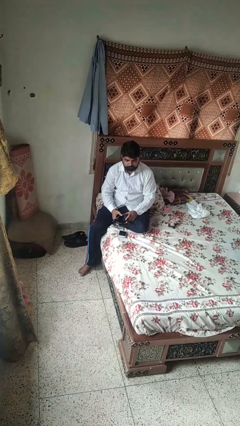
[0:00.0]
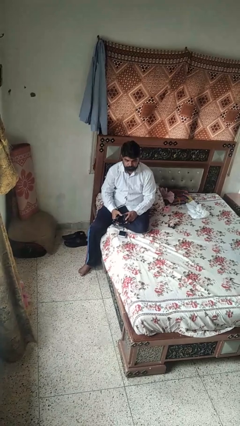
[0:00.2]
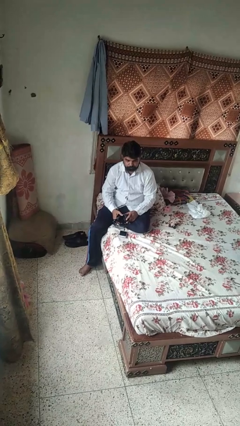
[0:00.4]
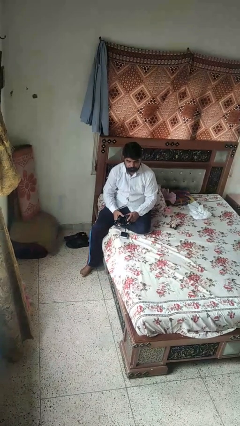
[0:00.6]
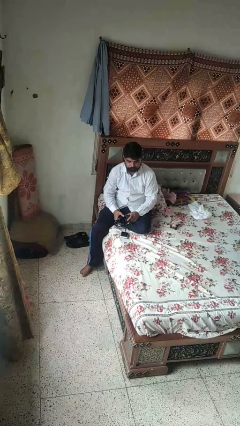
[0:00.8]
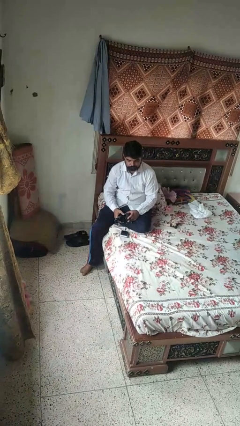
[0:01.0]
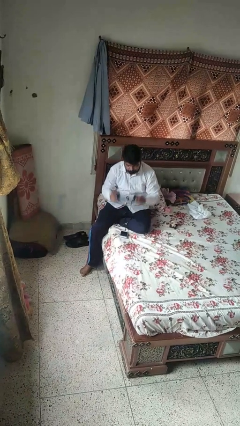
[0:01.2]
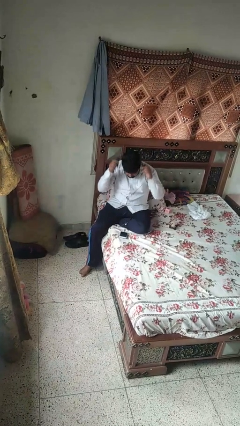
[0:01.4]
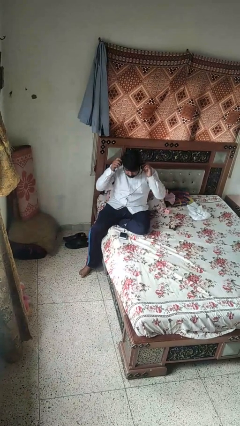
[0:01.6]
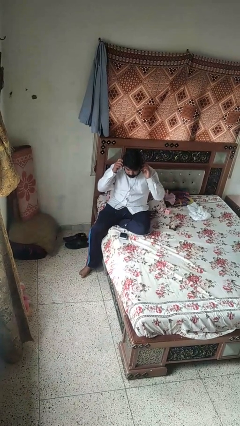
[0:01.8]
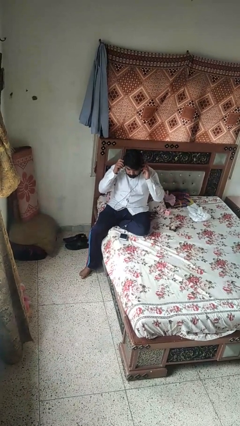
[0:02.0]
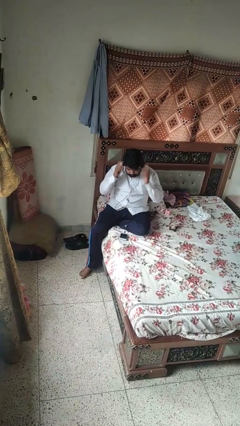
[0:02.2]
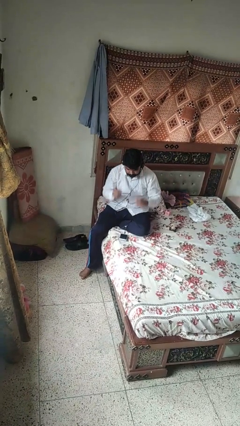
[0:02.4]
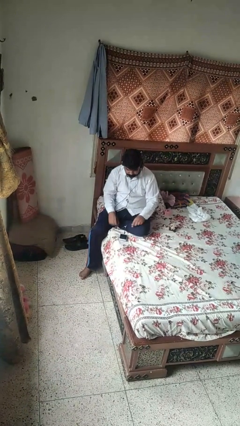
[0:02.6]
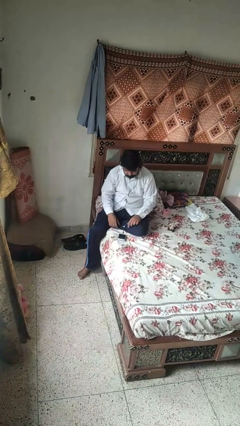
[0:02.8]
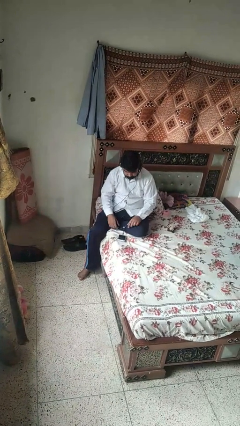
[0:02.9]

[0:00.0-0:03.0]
person puts on headphones

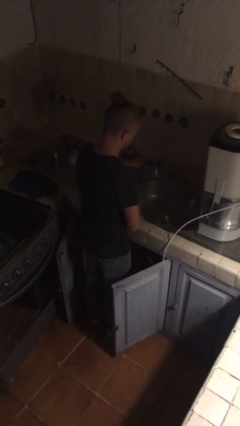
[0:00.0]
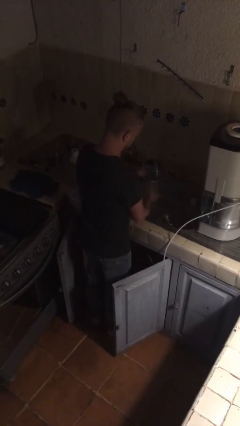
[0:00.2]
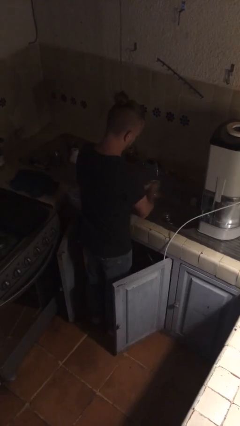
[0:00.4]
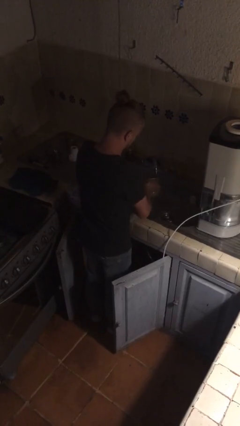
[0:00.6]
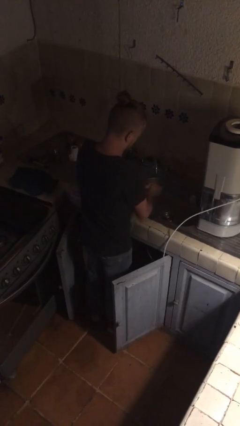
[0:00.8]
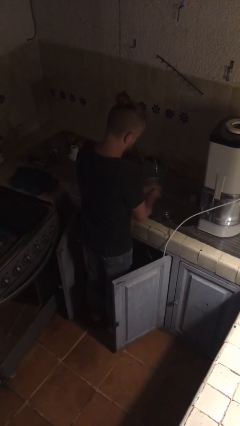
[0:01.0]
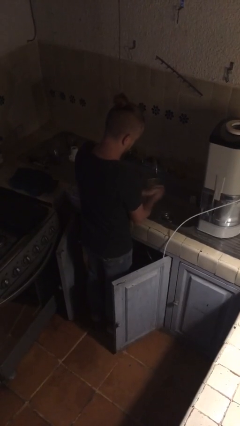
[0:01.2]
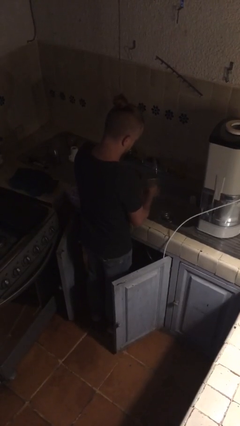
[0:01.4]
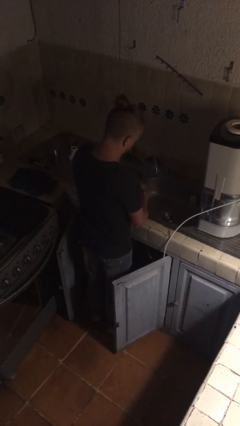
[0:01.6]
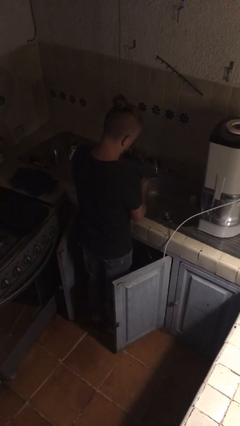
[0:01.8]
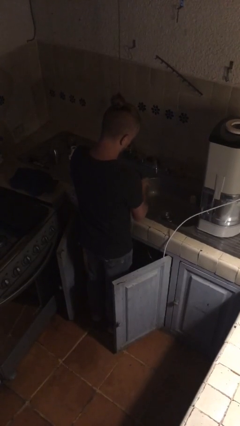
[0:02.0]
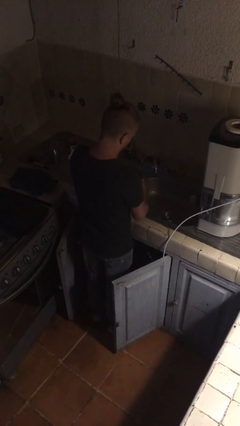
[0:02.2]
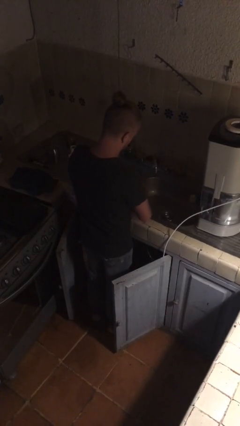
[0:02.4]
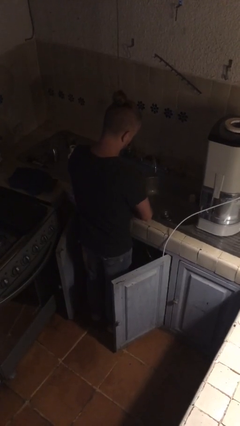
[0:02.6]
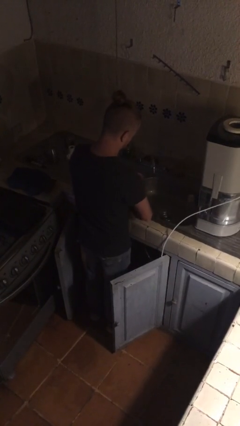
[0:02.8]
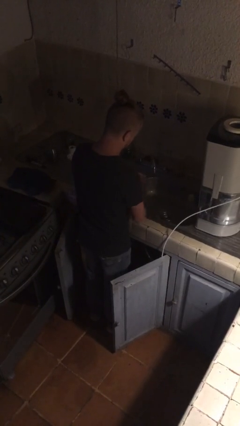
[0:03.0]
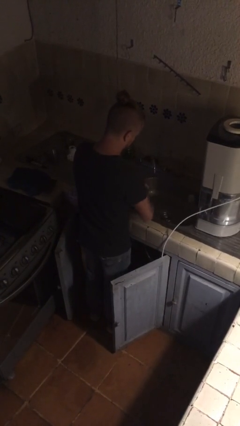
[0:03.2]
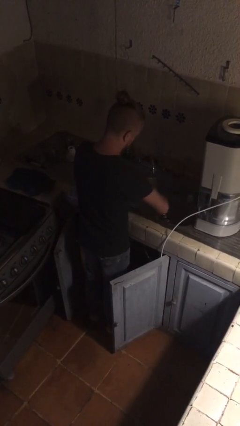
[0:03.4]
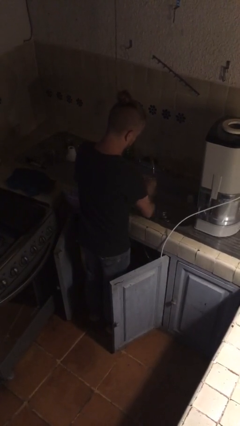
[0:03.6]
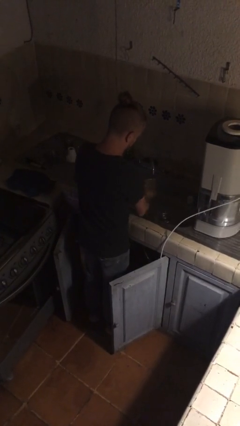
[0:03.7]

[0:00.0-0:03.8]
person washes hands

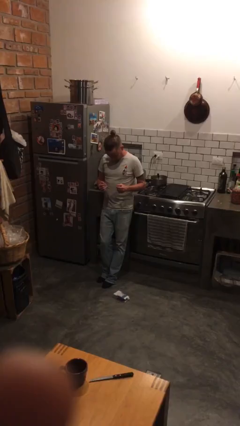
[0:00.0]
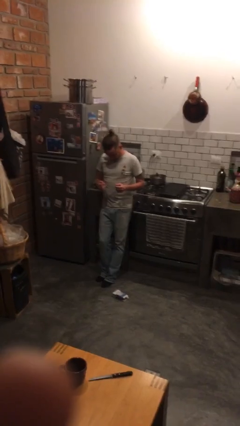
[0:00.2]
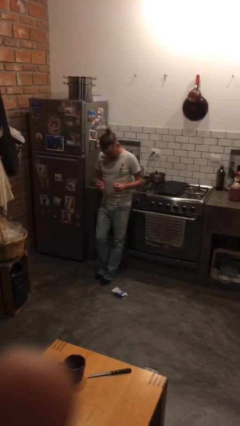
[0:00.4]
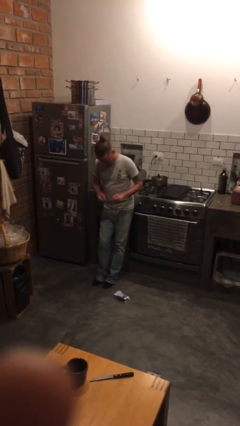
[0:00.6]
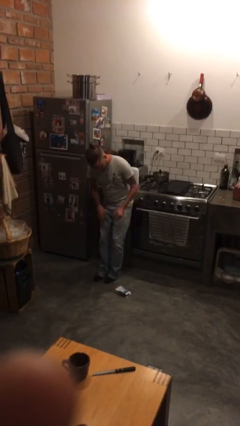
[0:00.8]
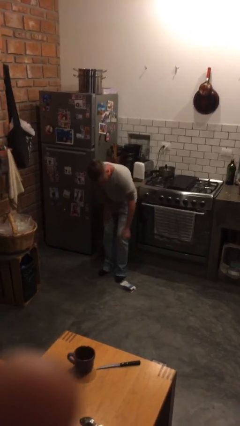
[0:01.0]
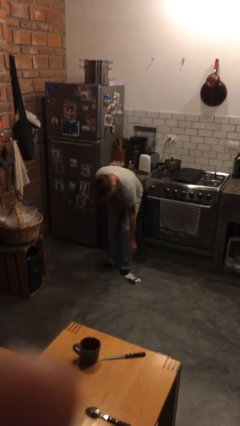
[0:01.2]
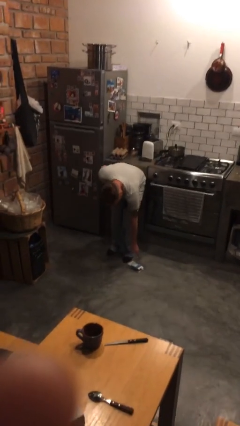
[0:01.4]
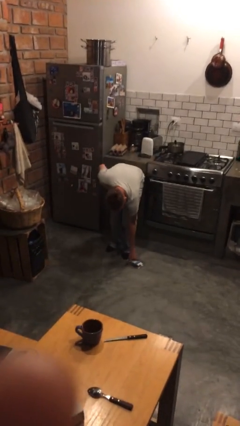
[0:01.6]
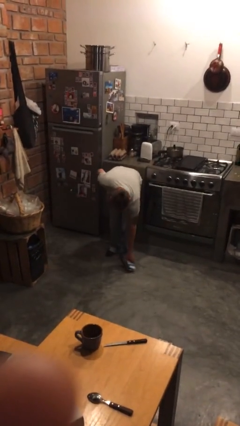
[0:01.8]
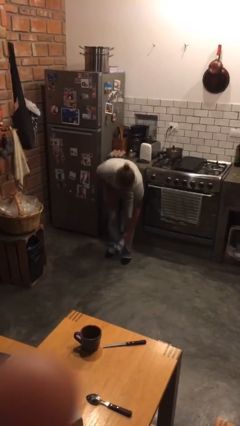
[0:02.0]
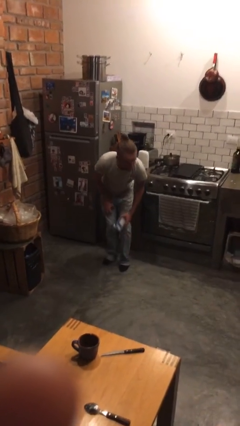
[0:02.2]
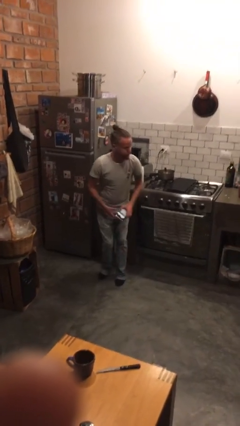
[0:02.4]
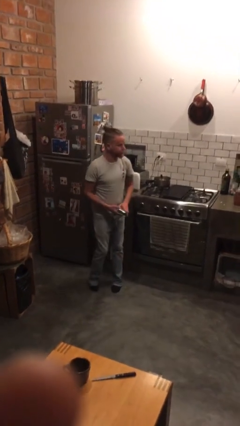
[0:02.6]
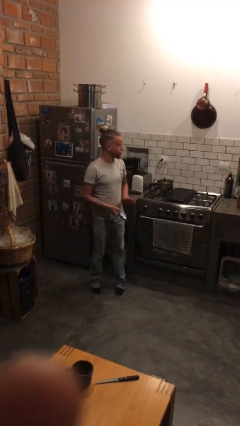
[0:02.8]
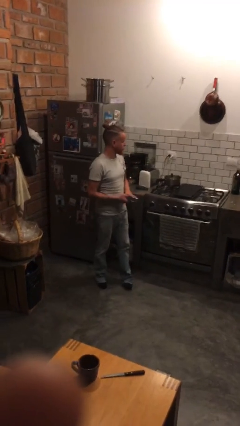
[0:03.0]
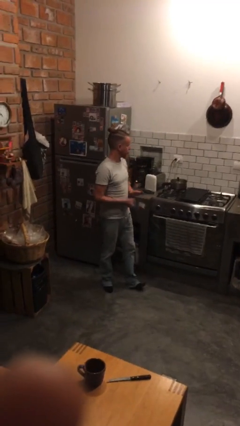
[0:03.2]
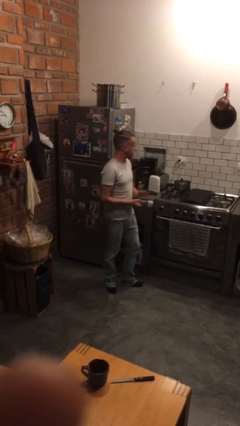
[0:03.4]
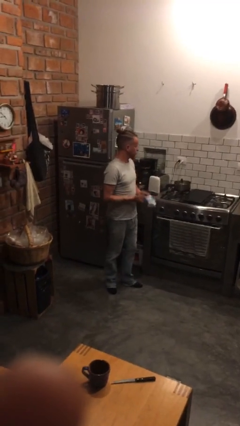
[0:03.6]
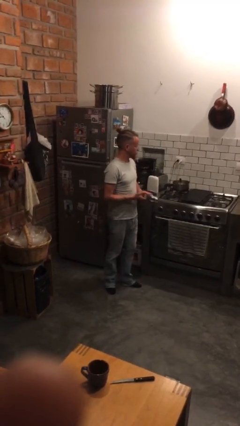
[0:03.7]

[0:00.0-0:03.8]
person picks up object from floor

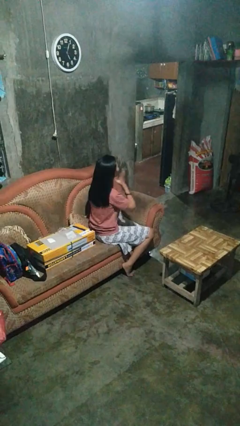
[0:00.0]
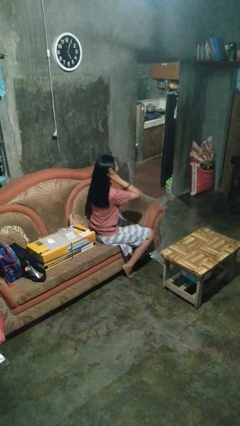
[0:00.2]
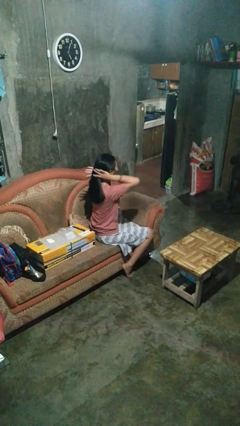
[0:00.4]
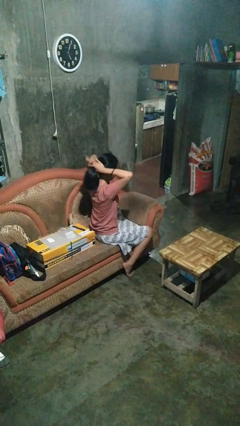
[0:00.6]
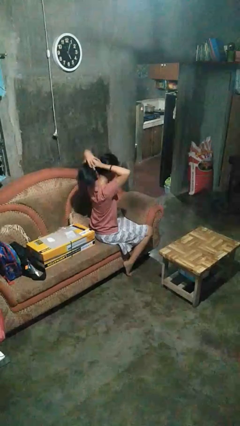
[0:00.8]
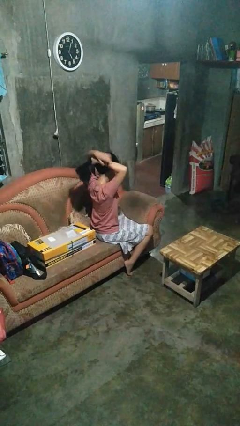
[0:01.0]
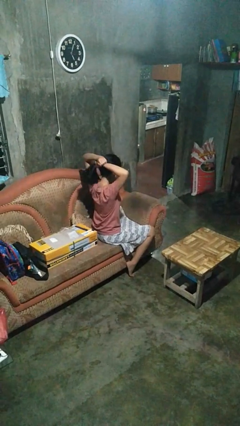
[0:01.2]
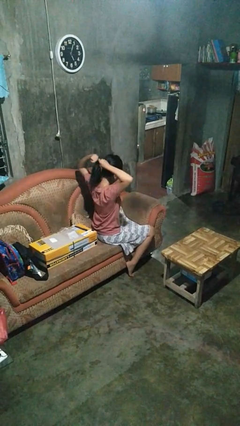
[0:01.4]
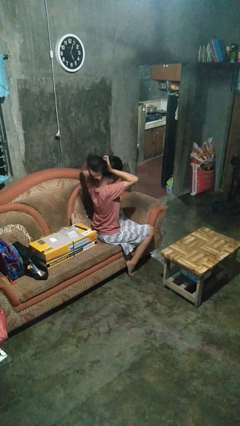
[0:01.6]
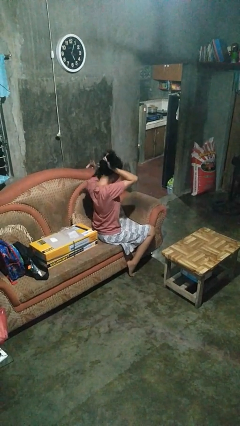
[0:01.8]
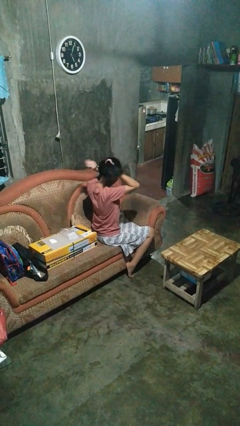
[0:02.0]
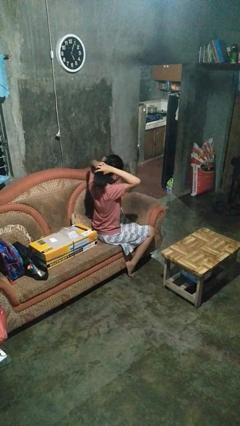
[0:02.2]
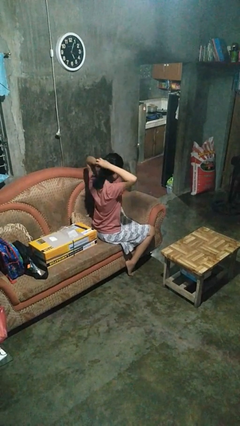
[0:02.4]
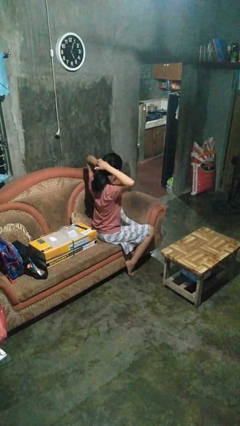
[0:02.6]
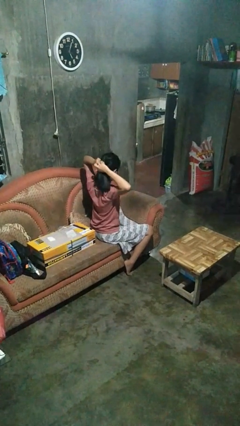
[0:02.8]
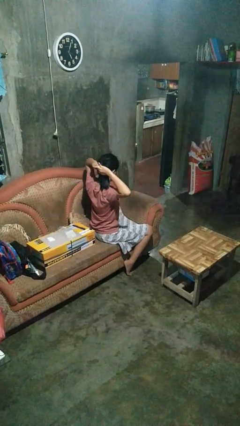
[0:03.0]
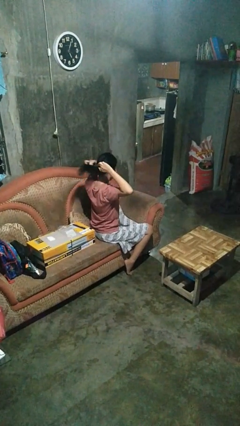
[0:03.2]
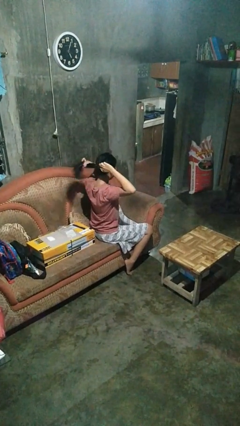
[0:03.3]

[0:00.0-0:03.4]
person puts hair in ponytail

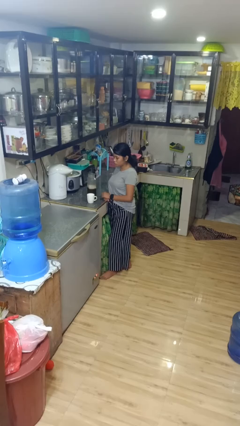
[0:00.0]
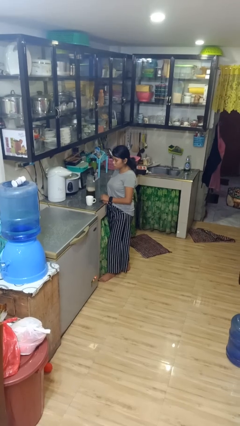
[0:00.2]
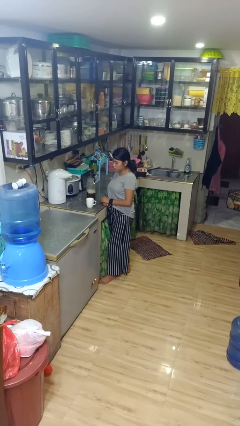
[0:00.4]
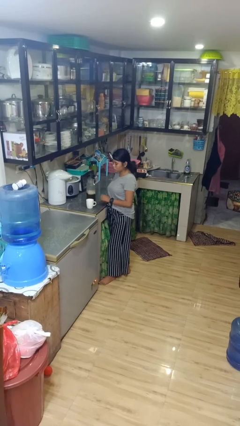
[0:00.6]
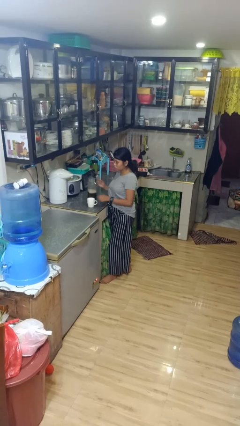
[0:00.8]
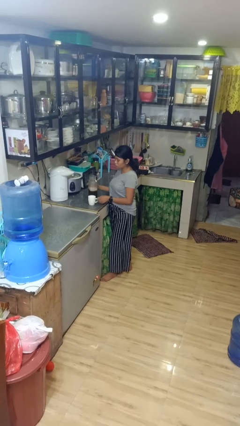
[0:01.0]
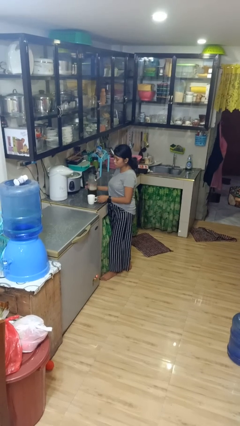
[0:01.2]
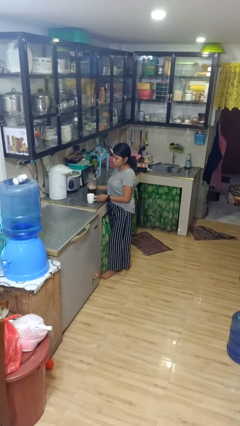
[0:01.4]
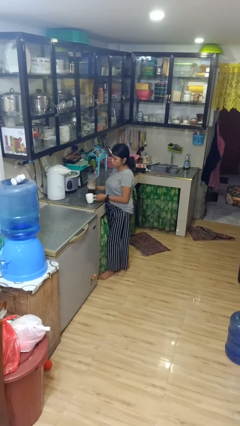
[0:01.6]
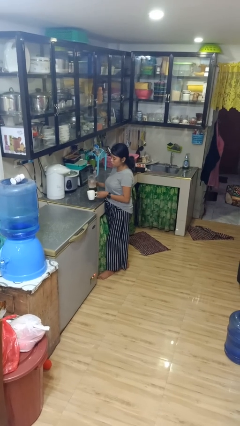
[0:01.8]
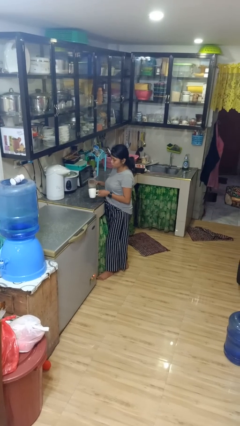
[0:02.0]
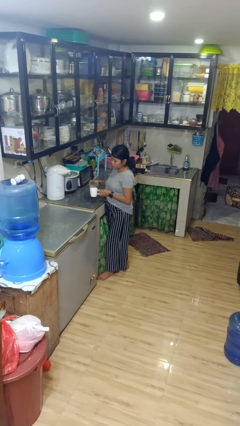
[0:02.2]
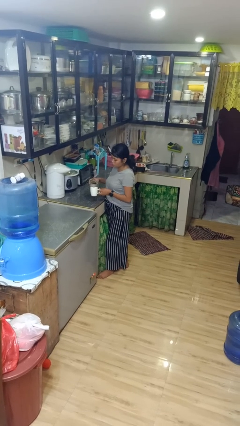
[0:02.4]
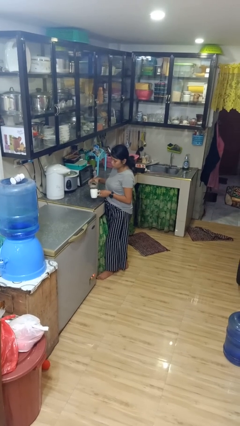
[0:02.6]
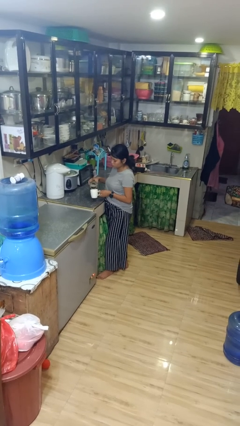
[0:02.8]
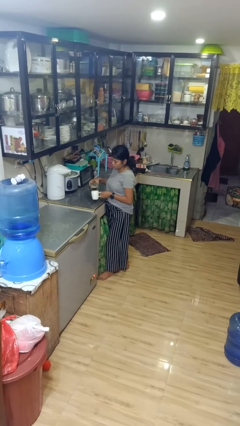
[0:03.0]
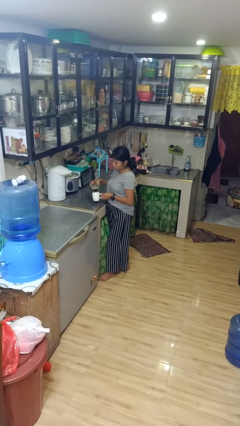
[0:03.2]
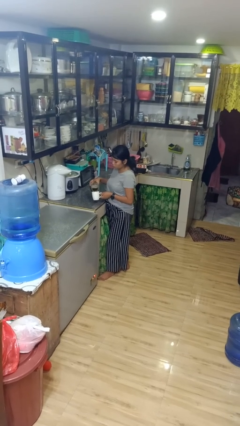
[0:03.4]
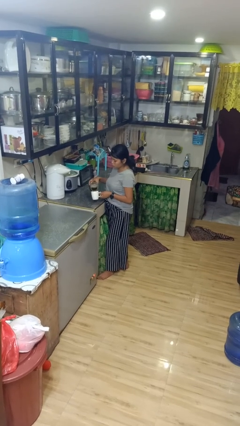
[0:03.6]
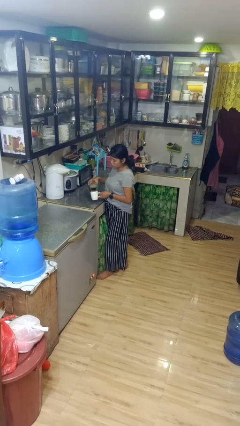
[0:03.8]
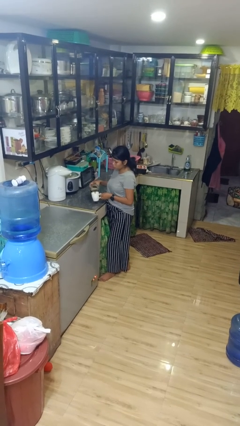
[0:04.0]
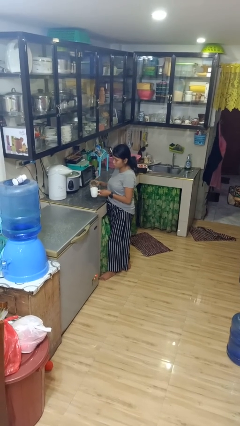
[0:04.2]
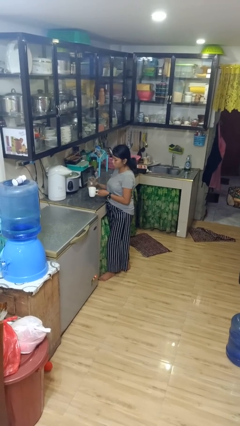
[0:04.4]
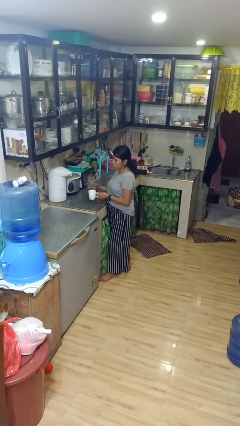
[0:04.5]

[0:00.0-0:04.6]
person pours coffee into mug
